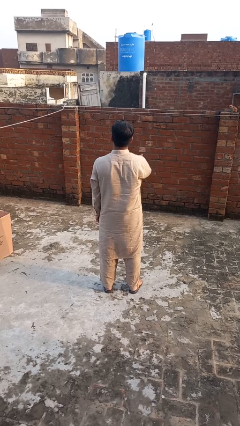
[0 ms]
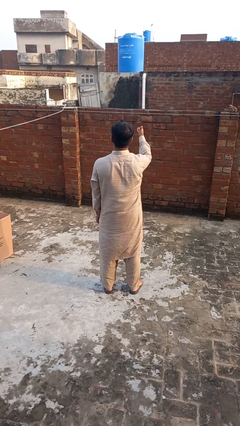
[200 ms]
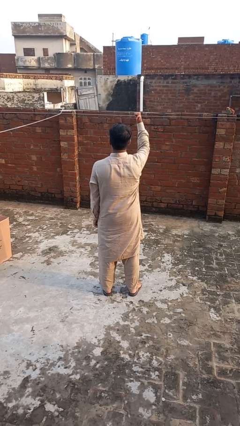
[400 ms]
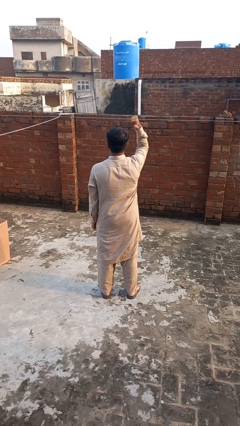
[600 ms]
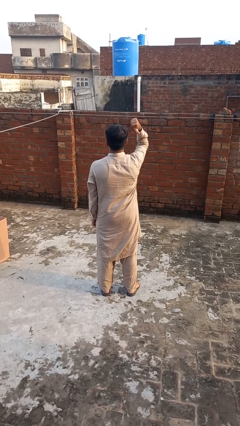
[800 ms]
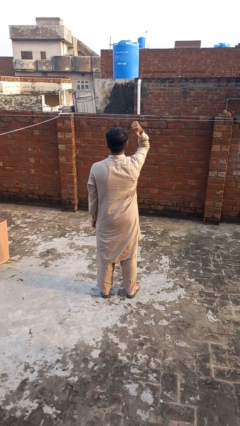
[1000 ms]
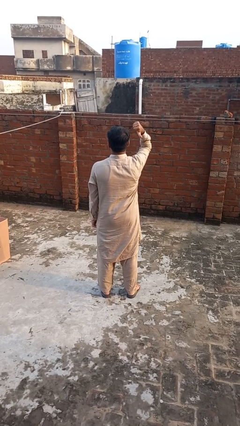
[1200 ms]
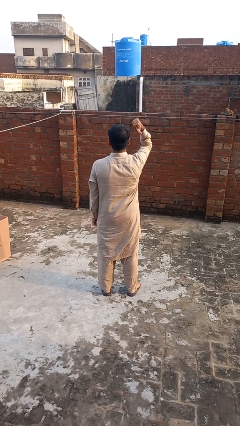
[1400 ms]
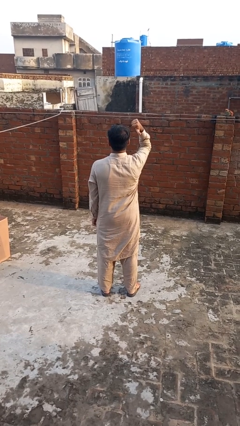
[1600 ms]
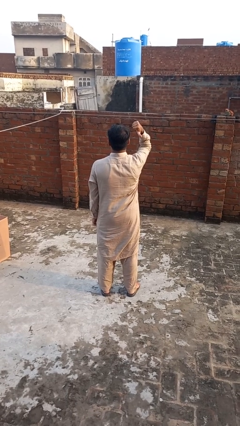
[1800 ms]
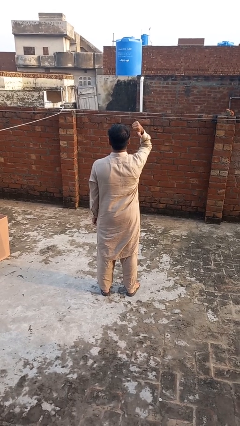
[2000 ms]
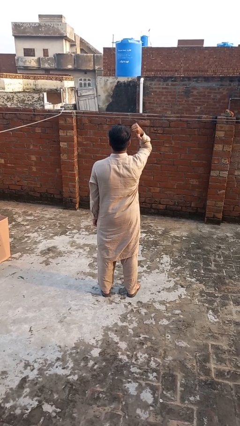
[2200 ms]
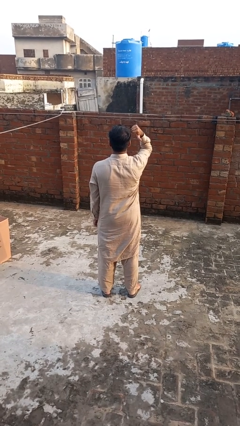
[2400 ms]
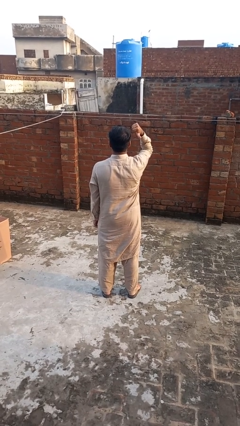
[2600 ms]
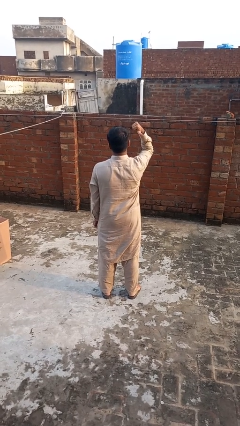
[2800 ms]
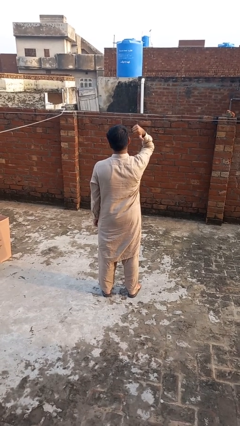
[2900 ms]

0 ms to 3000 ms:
person gestures behind me

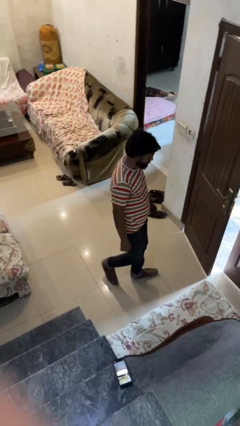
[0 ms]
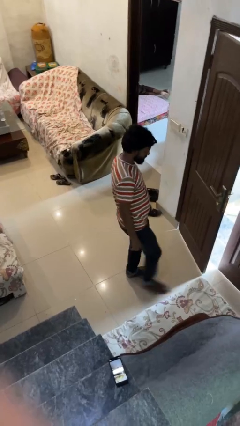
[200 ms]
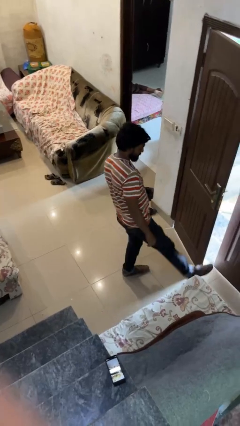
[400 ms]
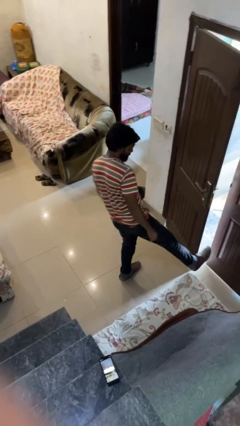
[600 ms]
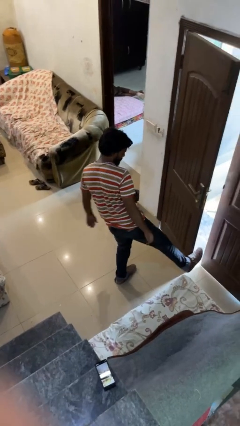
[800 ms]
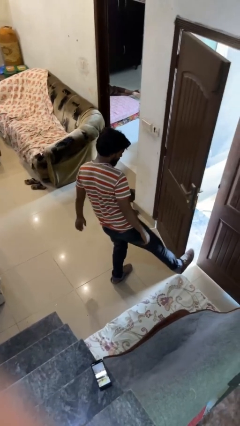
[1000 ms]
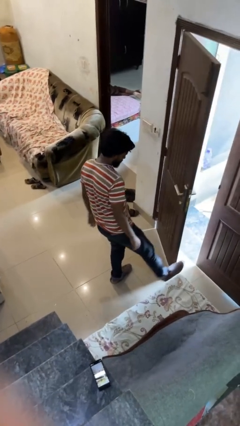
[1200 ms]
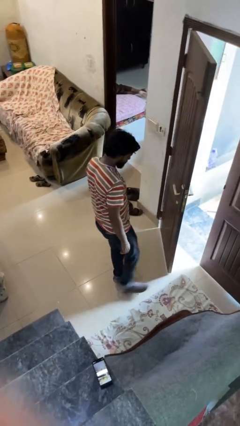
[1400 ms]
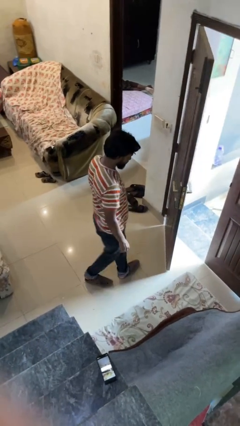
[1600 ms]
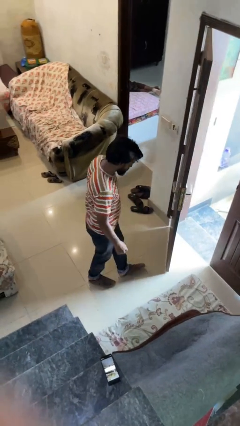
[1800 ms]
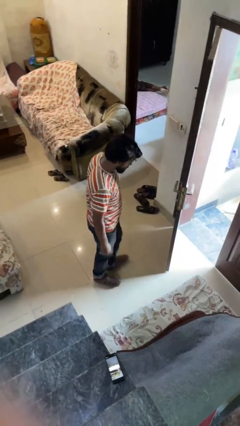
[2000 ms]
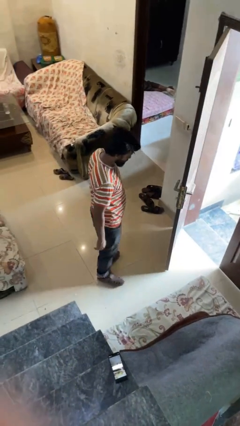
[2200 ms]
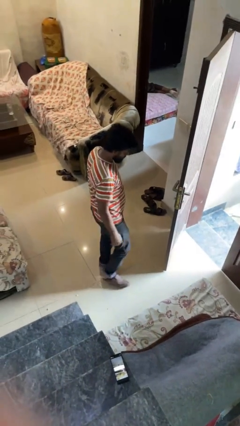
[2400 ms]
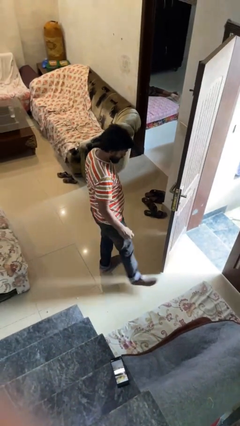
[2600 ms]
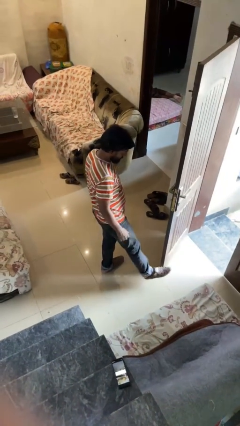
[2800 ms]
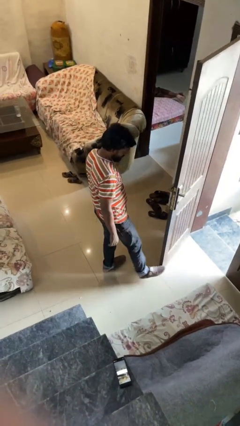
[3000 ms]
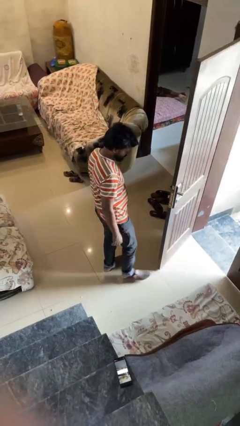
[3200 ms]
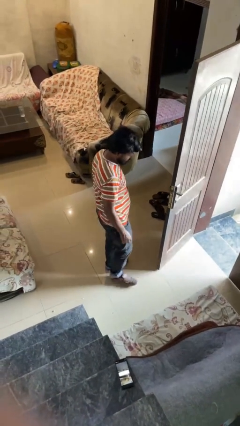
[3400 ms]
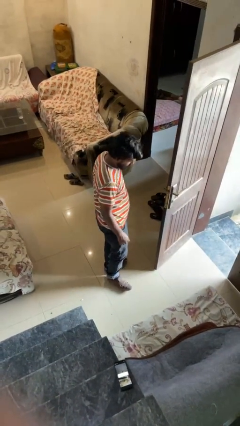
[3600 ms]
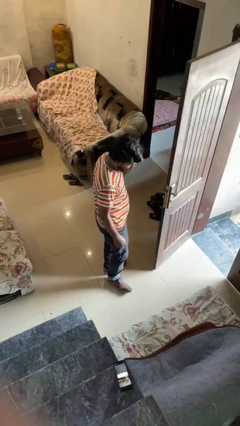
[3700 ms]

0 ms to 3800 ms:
person opens facility door

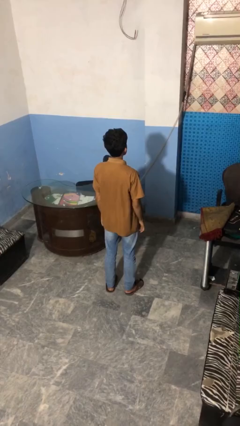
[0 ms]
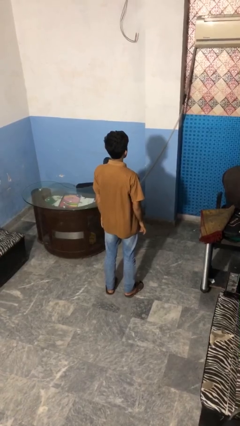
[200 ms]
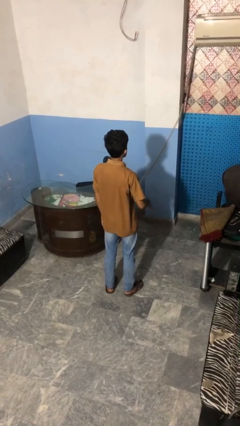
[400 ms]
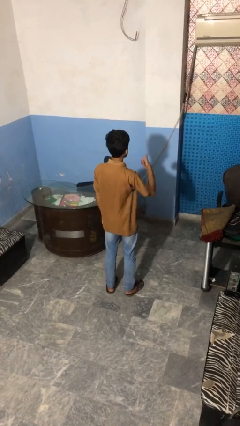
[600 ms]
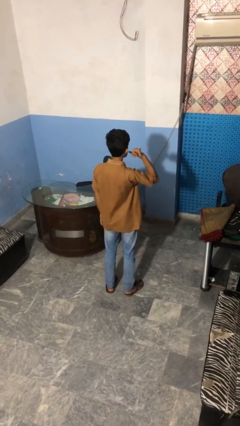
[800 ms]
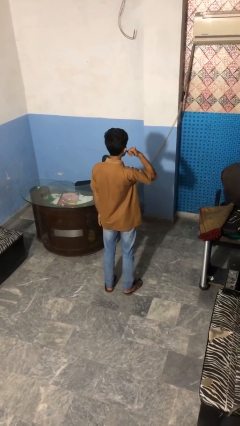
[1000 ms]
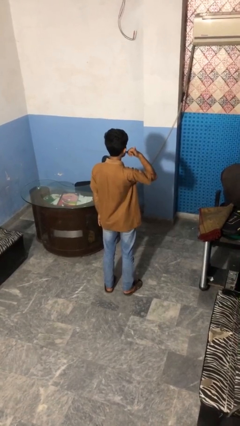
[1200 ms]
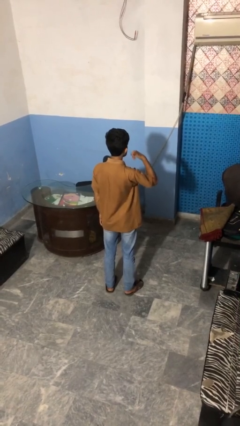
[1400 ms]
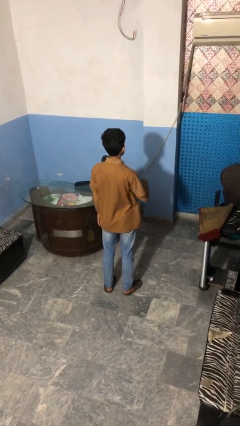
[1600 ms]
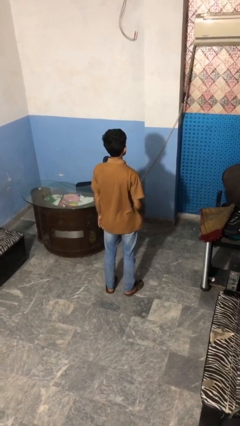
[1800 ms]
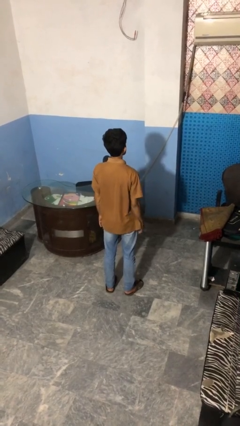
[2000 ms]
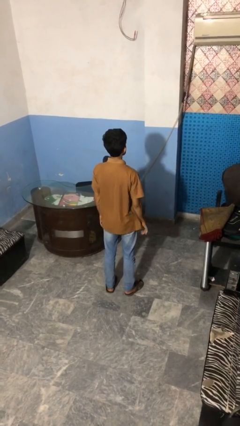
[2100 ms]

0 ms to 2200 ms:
person gestures call me

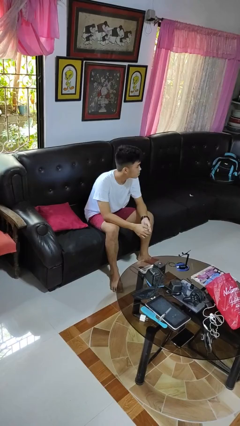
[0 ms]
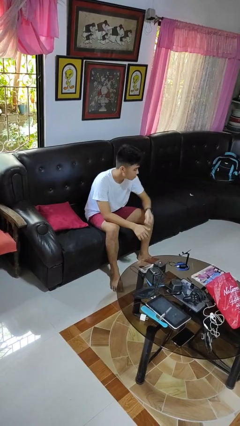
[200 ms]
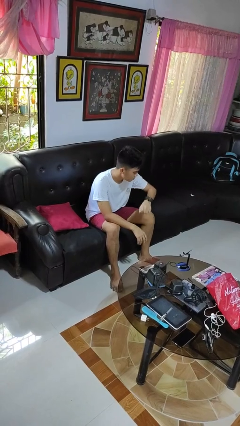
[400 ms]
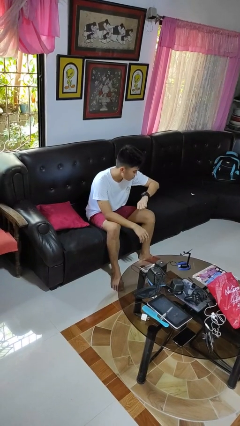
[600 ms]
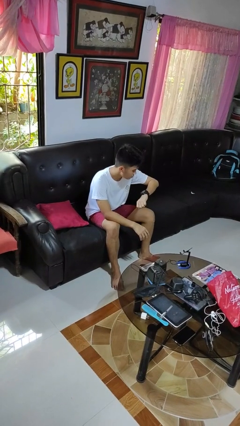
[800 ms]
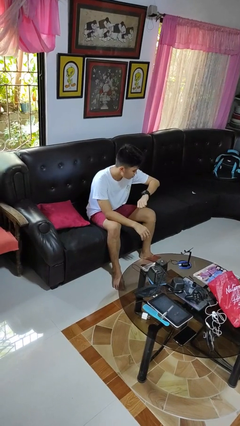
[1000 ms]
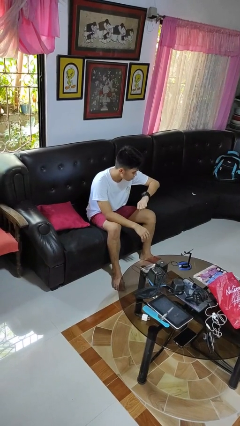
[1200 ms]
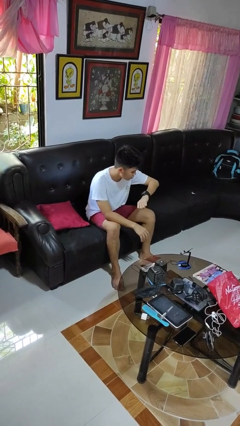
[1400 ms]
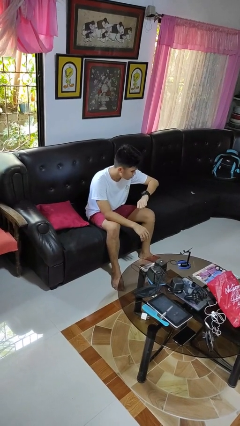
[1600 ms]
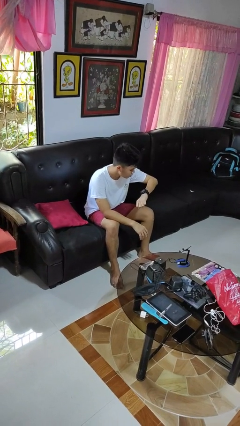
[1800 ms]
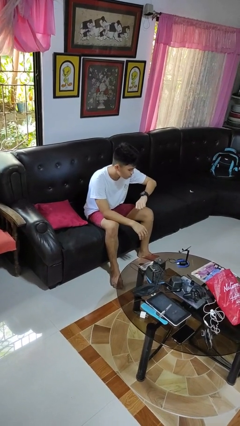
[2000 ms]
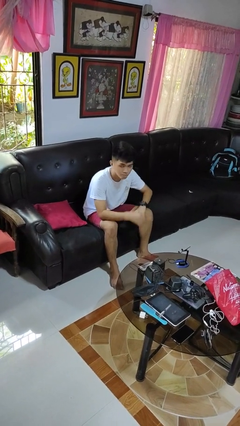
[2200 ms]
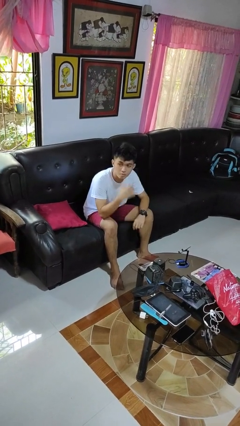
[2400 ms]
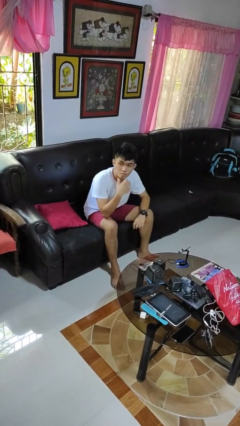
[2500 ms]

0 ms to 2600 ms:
person looks at wristwatch

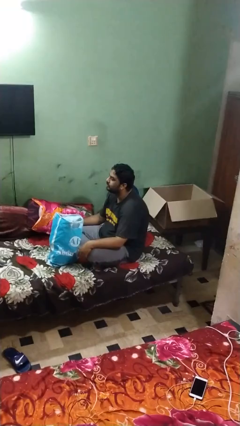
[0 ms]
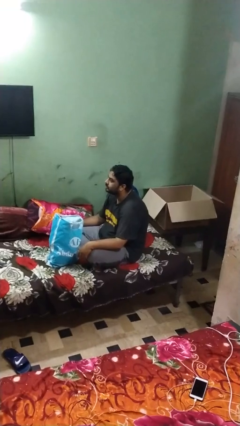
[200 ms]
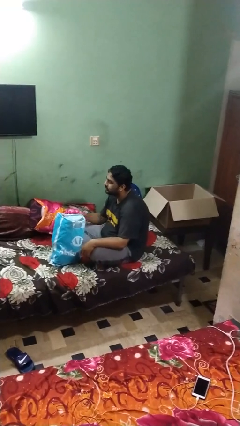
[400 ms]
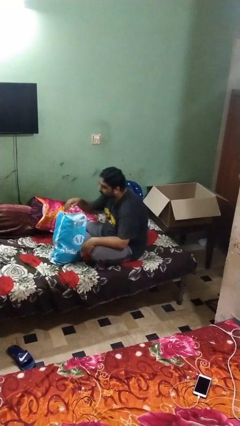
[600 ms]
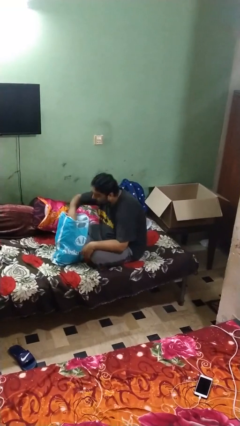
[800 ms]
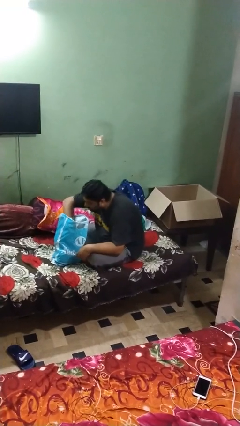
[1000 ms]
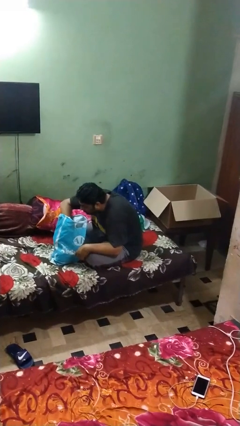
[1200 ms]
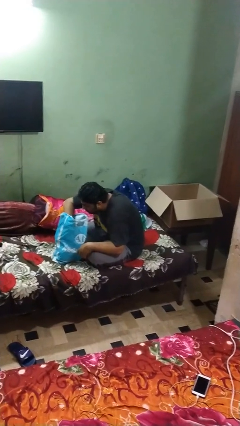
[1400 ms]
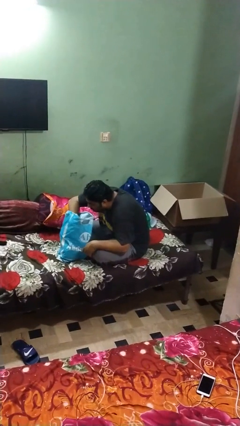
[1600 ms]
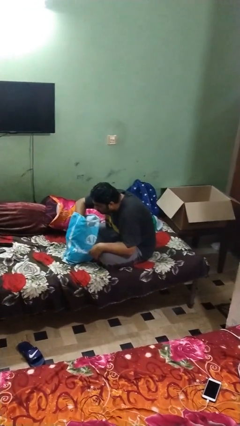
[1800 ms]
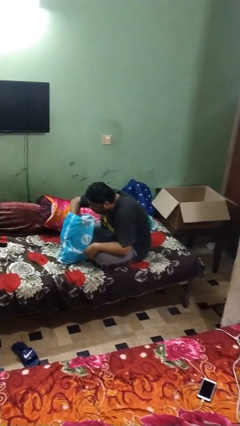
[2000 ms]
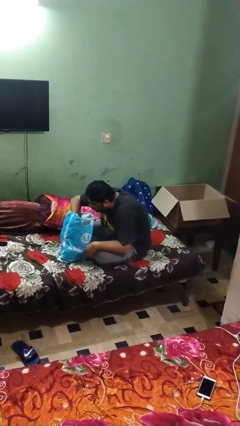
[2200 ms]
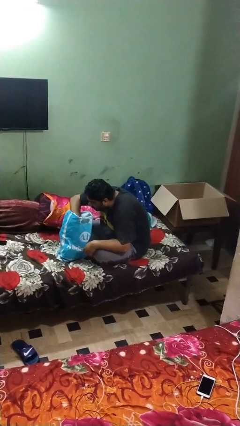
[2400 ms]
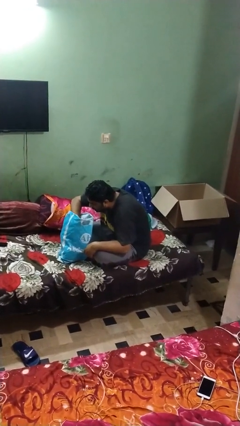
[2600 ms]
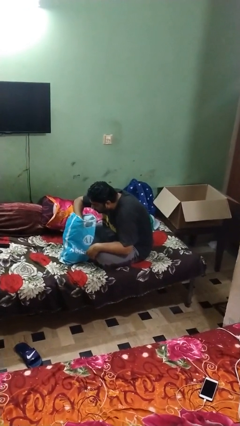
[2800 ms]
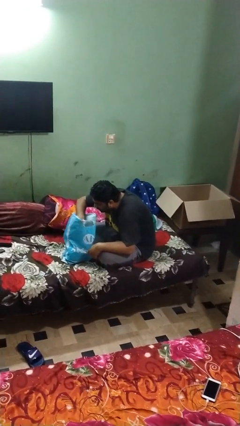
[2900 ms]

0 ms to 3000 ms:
person searches in bag

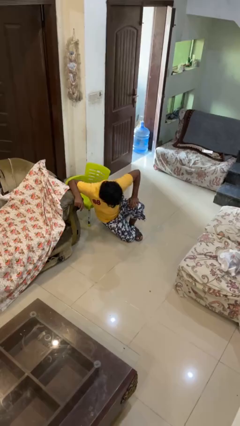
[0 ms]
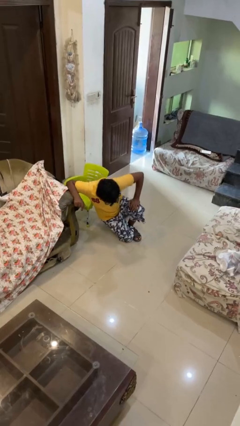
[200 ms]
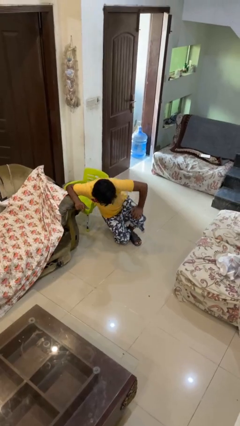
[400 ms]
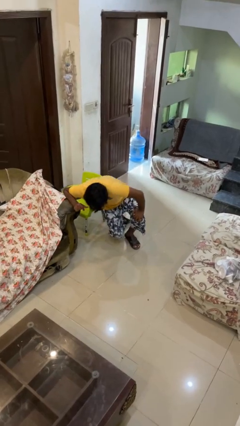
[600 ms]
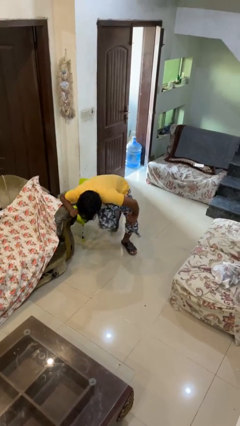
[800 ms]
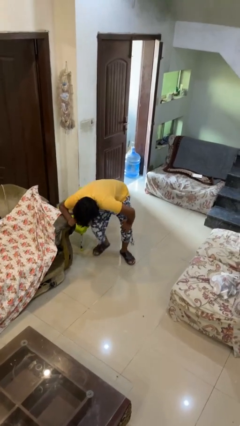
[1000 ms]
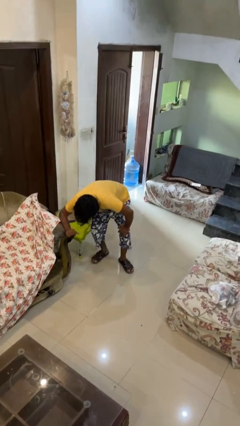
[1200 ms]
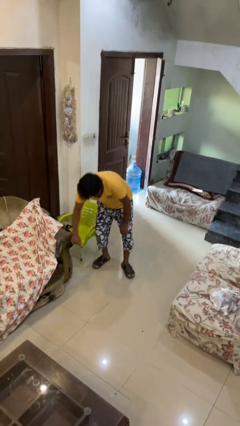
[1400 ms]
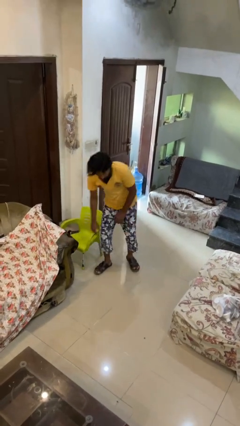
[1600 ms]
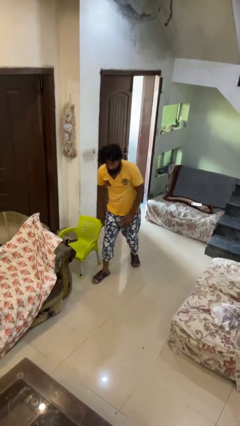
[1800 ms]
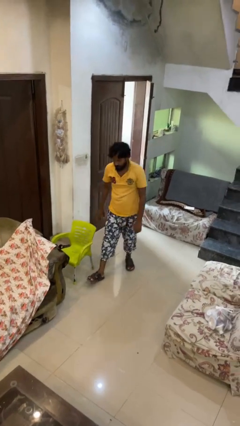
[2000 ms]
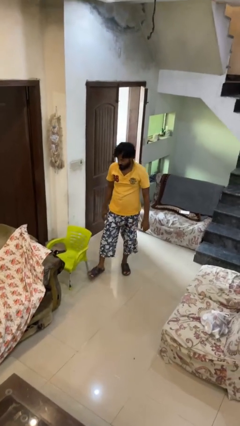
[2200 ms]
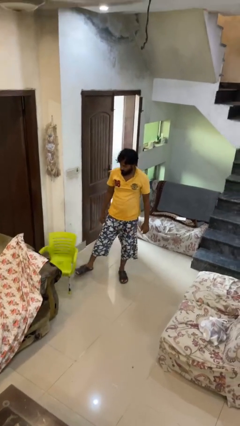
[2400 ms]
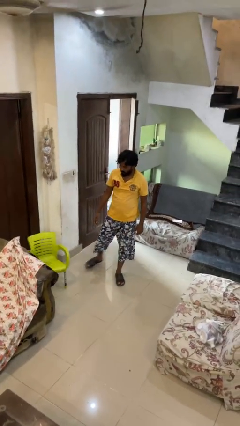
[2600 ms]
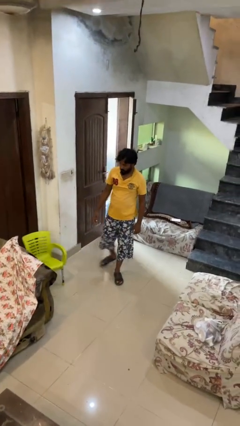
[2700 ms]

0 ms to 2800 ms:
person stands up from floor

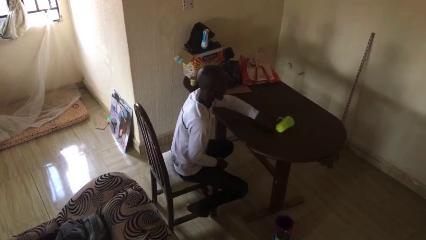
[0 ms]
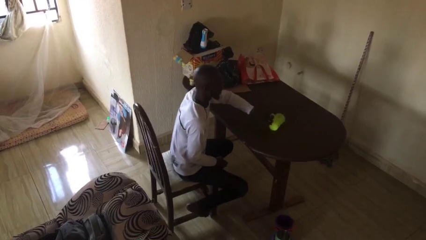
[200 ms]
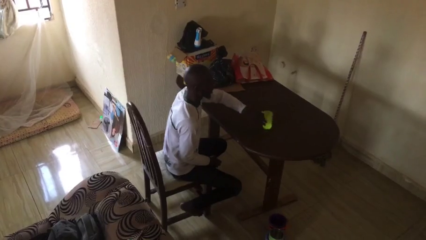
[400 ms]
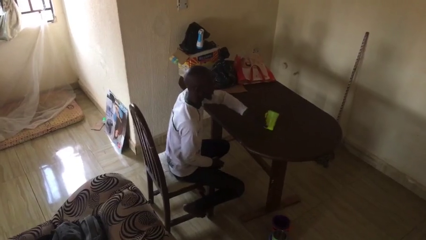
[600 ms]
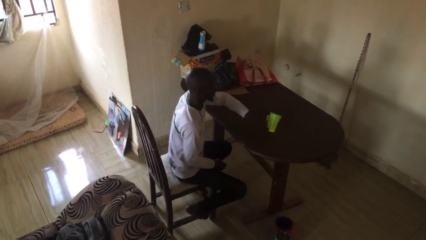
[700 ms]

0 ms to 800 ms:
person sets upright glass
